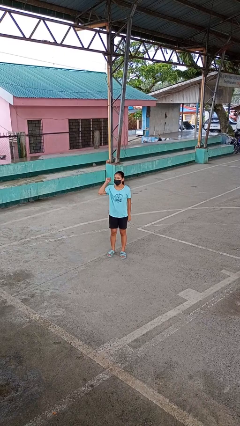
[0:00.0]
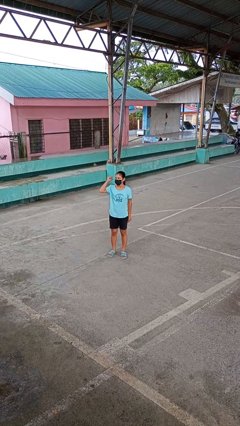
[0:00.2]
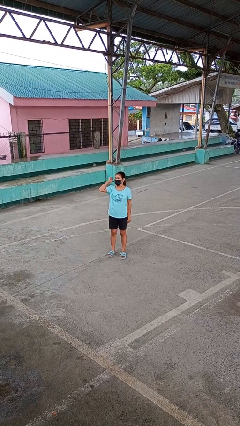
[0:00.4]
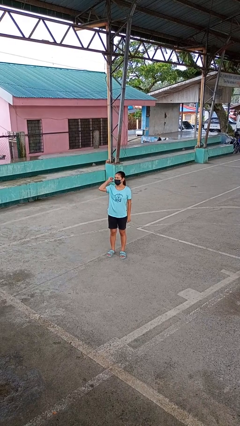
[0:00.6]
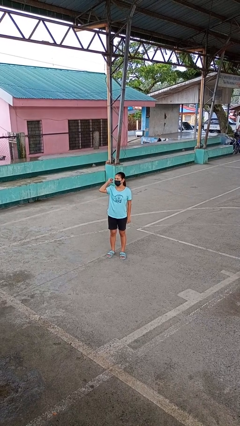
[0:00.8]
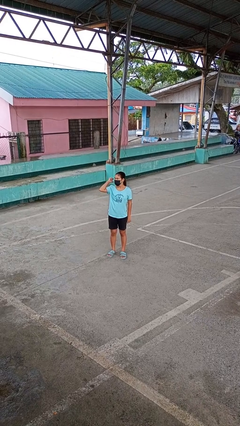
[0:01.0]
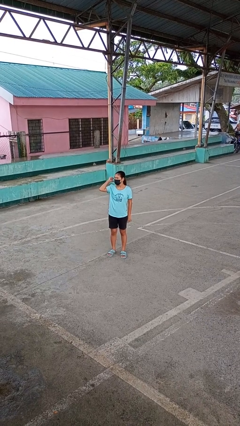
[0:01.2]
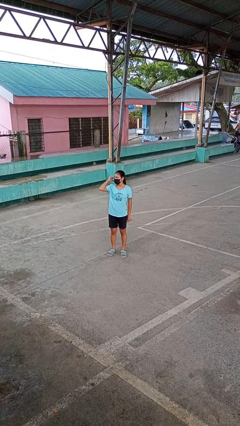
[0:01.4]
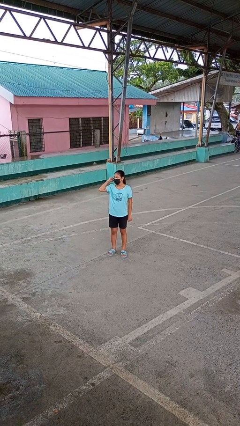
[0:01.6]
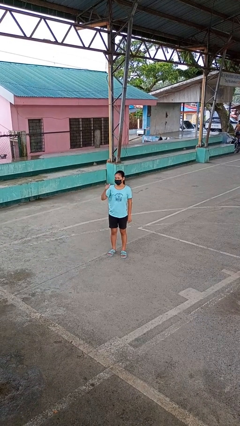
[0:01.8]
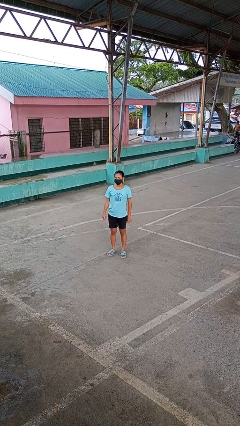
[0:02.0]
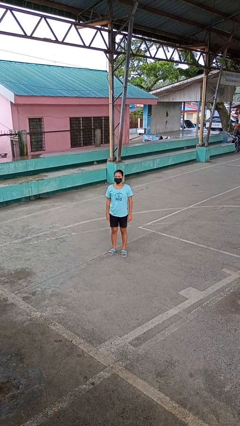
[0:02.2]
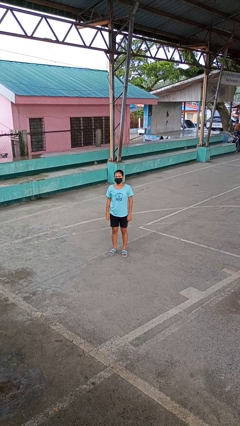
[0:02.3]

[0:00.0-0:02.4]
person gestures behind me

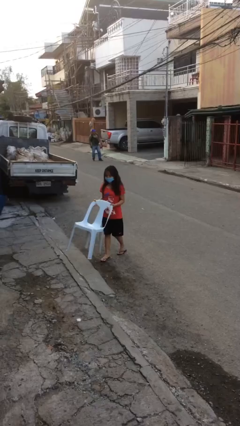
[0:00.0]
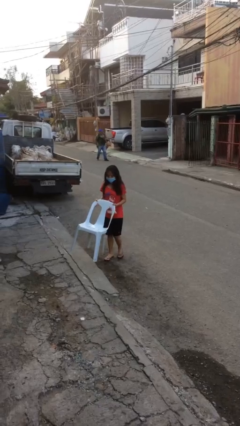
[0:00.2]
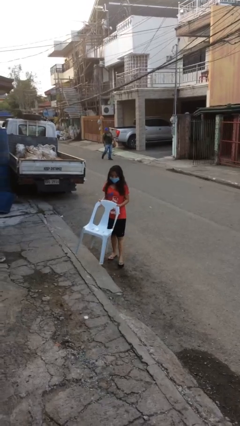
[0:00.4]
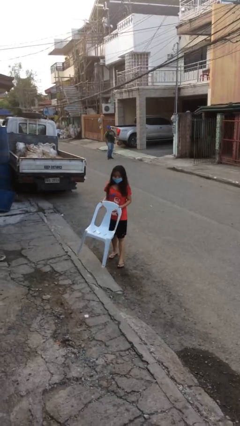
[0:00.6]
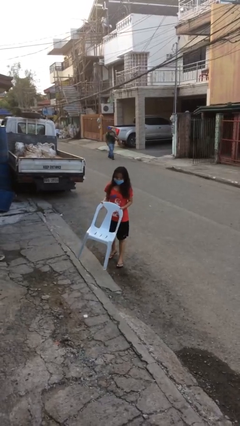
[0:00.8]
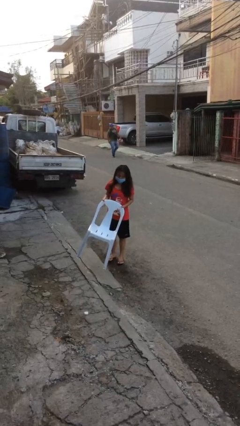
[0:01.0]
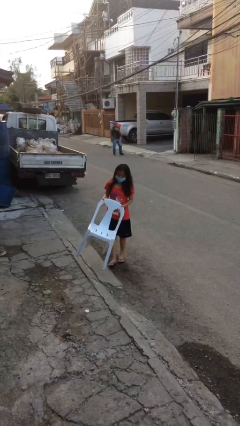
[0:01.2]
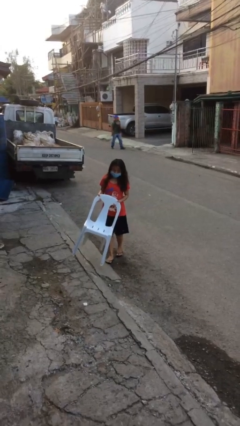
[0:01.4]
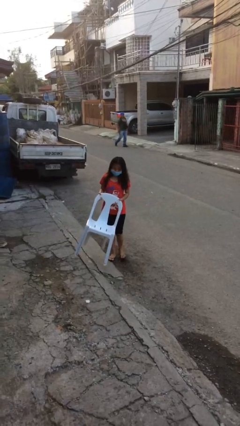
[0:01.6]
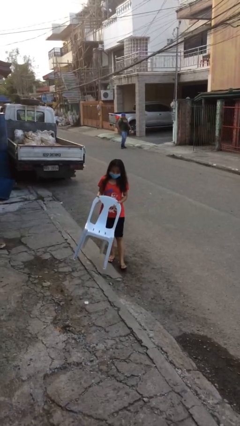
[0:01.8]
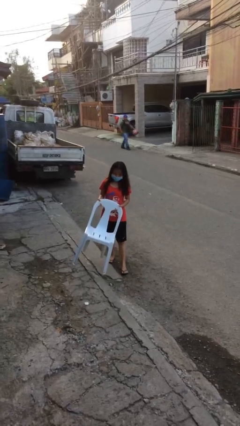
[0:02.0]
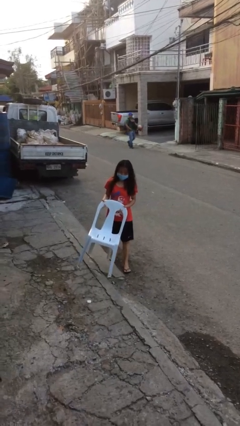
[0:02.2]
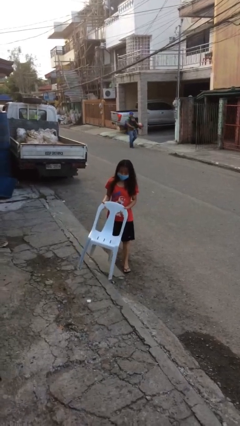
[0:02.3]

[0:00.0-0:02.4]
person carries heavy object

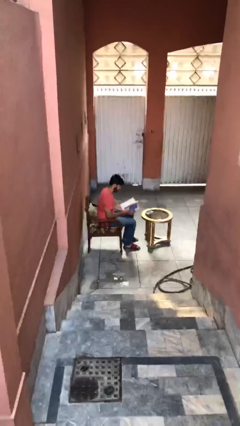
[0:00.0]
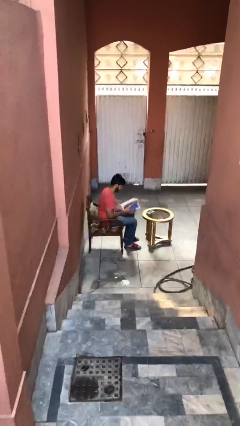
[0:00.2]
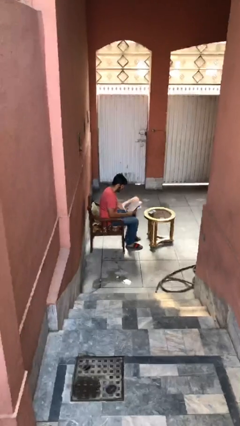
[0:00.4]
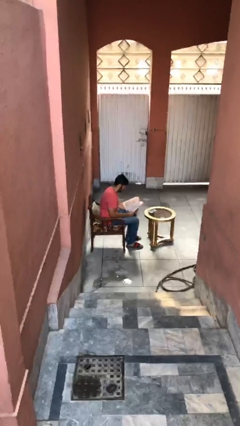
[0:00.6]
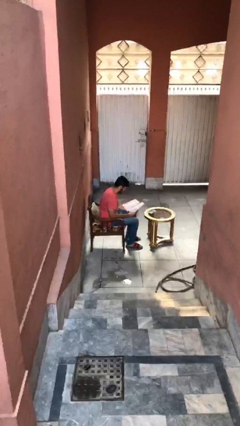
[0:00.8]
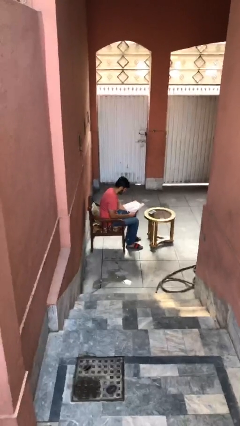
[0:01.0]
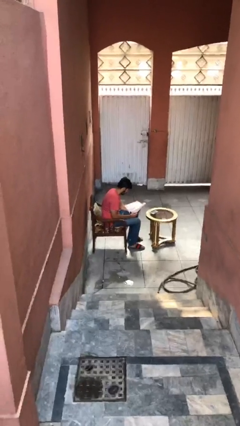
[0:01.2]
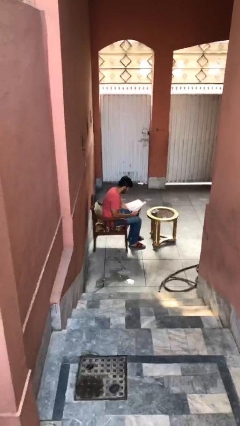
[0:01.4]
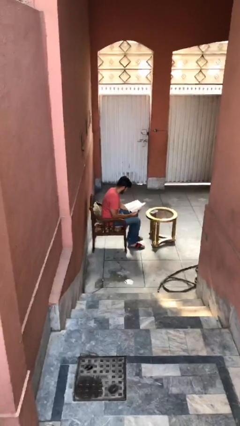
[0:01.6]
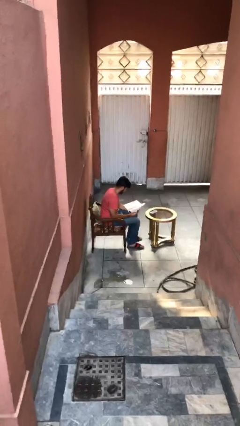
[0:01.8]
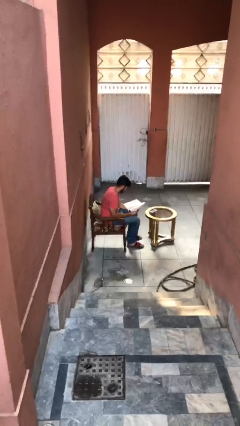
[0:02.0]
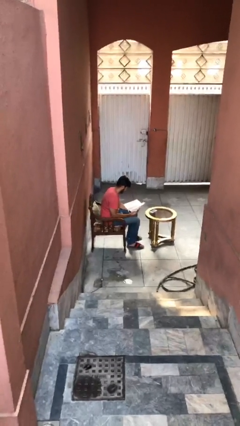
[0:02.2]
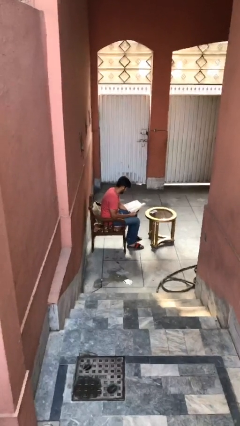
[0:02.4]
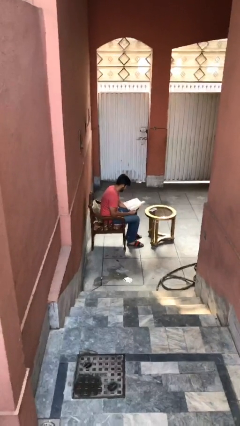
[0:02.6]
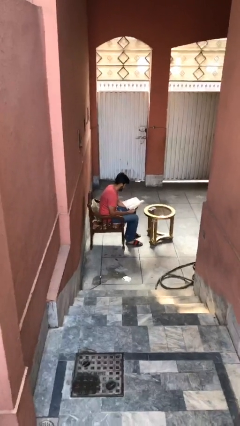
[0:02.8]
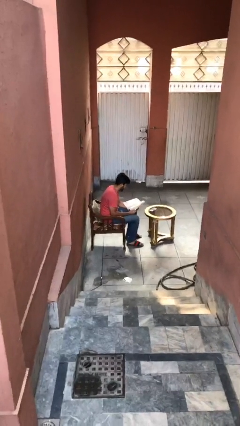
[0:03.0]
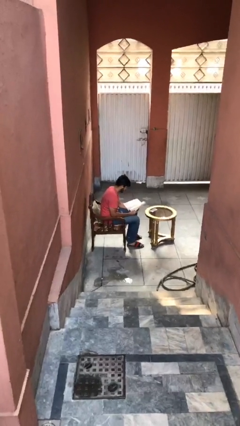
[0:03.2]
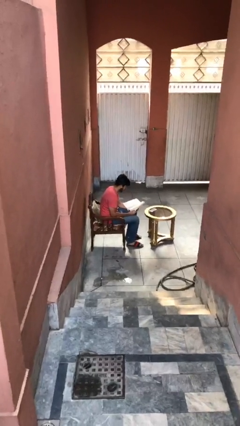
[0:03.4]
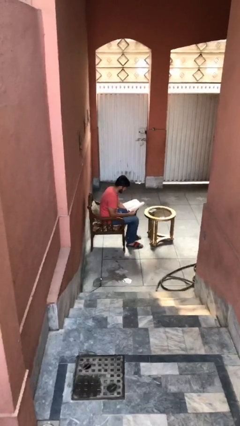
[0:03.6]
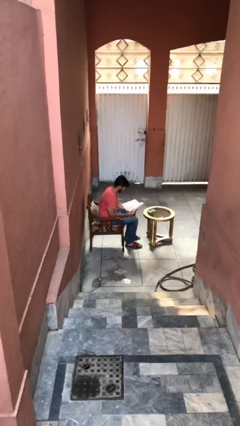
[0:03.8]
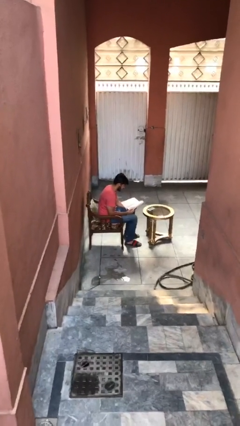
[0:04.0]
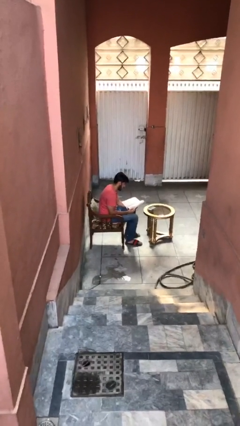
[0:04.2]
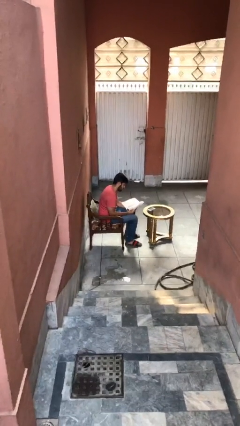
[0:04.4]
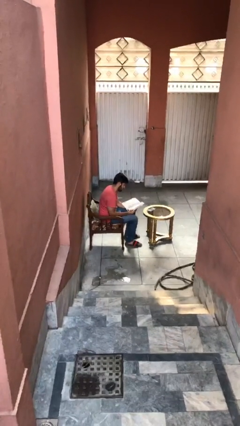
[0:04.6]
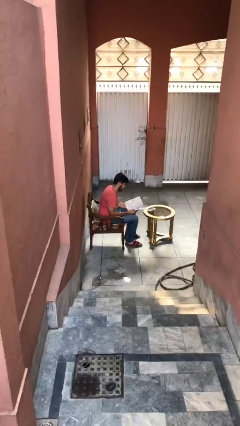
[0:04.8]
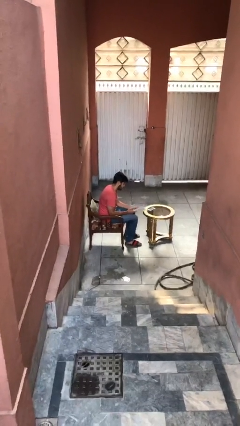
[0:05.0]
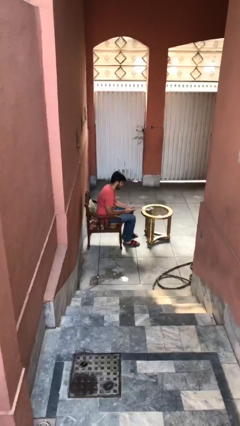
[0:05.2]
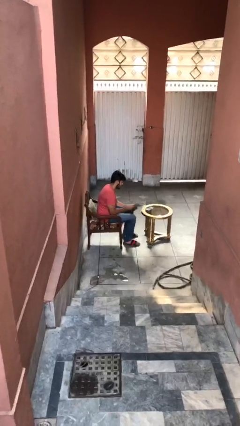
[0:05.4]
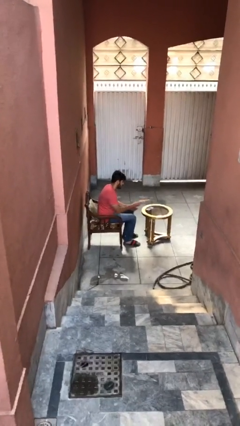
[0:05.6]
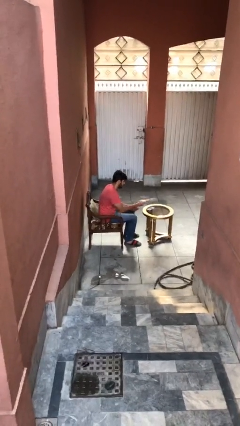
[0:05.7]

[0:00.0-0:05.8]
person reads document

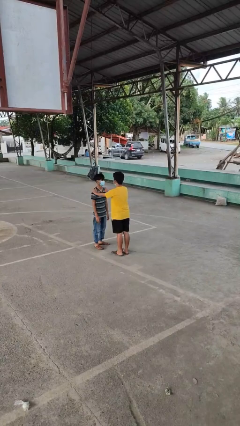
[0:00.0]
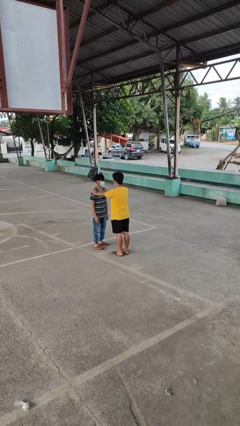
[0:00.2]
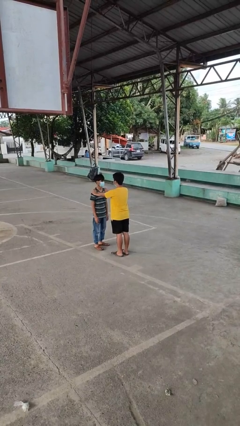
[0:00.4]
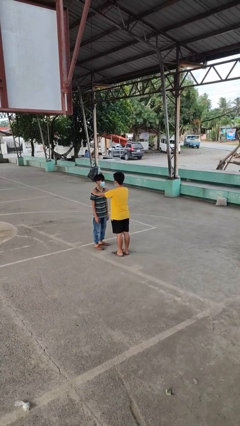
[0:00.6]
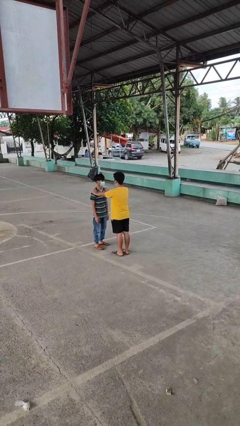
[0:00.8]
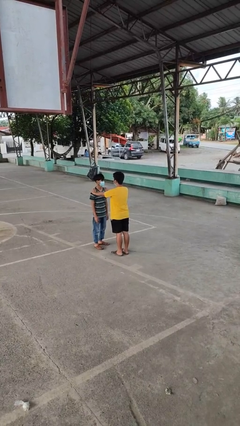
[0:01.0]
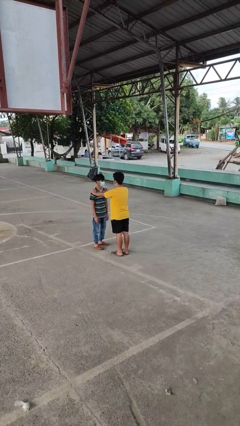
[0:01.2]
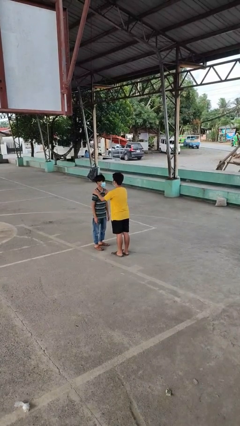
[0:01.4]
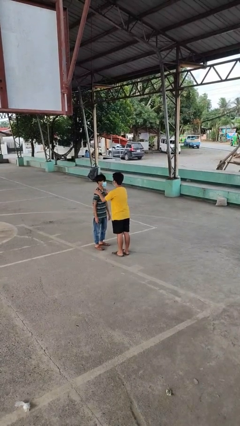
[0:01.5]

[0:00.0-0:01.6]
person grabs person by shoulder

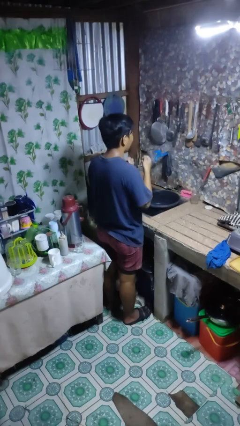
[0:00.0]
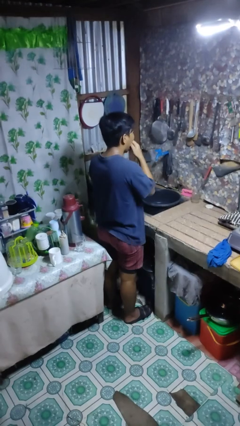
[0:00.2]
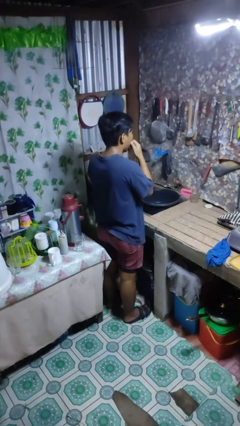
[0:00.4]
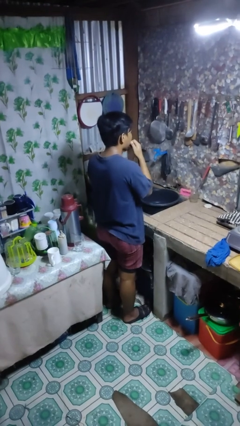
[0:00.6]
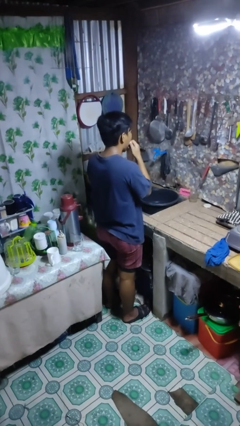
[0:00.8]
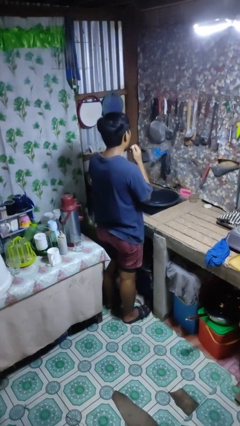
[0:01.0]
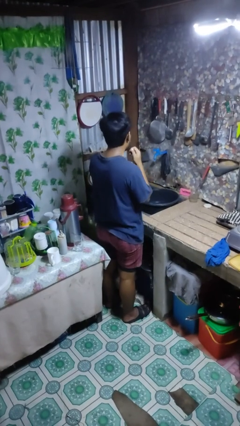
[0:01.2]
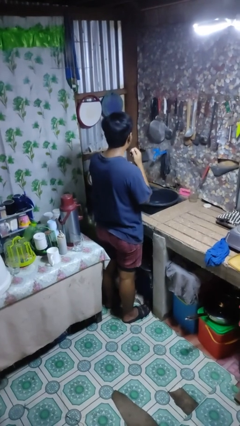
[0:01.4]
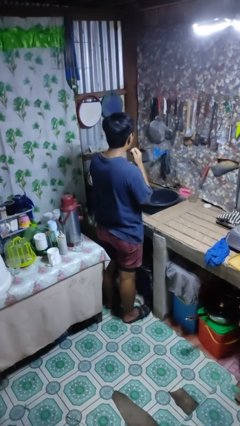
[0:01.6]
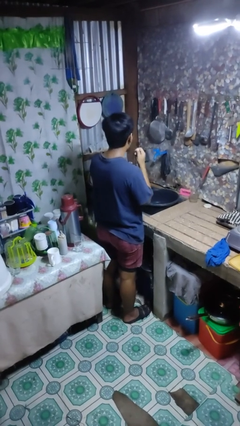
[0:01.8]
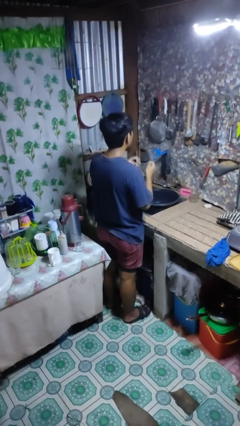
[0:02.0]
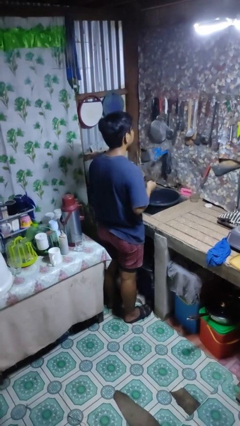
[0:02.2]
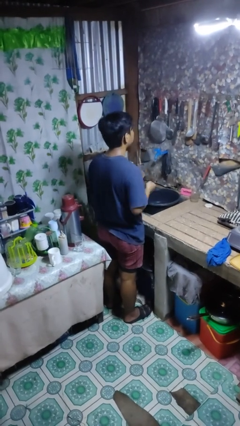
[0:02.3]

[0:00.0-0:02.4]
person flosses

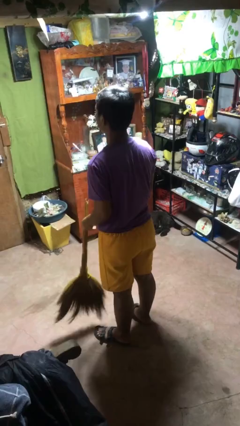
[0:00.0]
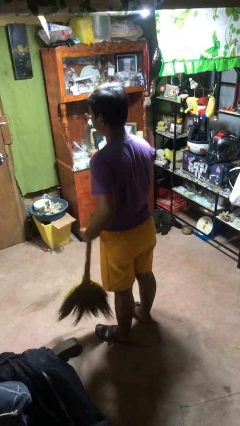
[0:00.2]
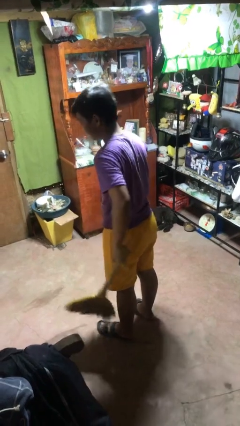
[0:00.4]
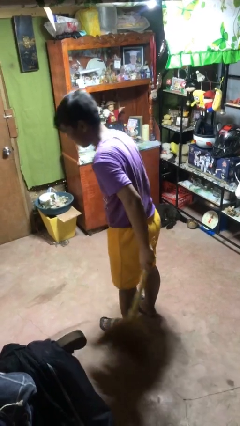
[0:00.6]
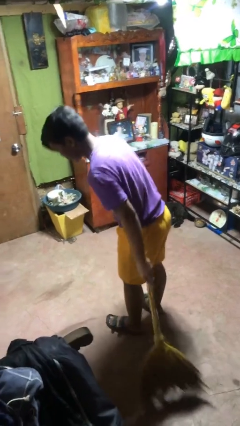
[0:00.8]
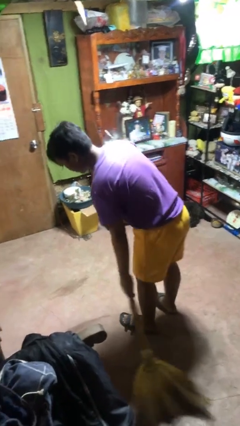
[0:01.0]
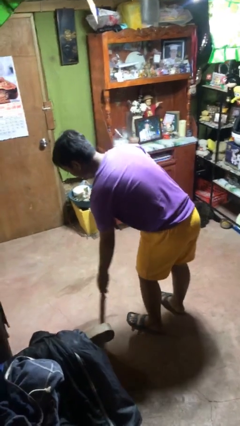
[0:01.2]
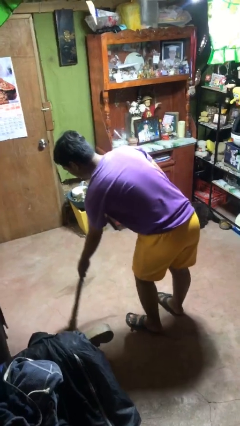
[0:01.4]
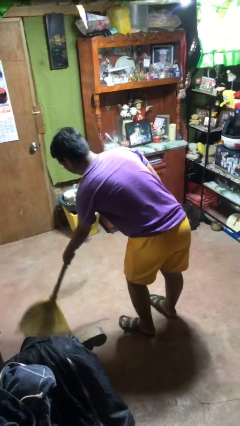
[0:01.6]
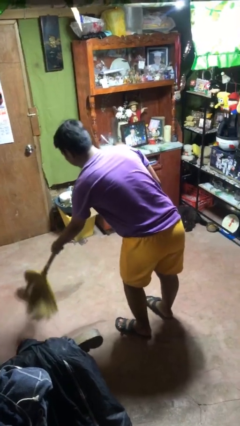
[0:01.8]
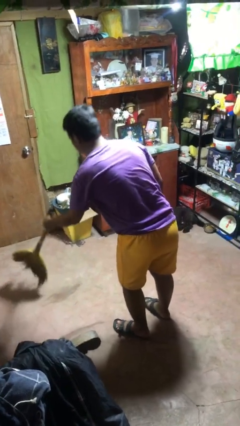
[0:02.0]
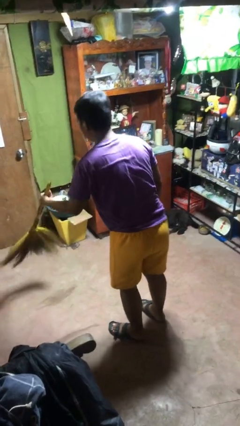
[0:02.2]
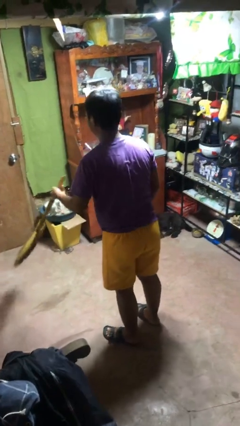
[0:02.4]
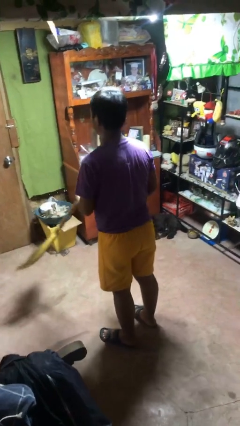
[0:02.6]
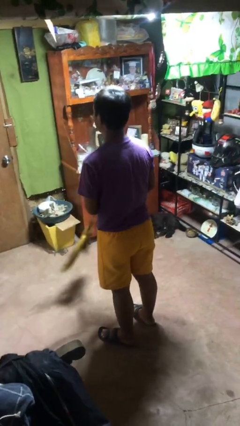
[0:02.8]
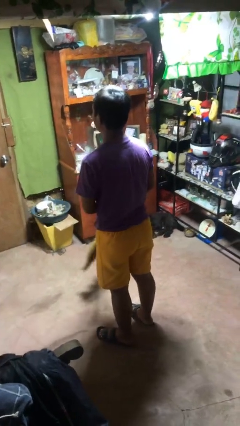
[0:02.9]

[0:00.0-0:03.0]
person sweeps floor
